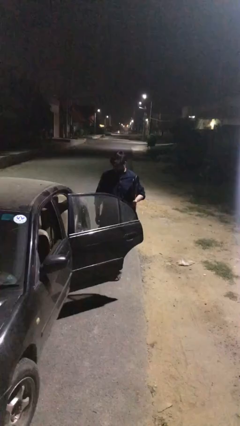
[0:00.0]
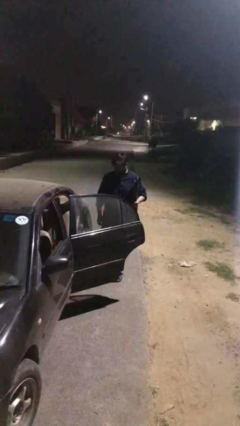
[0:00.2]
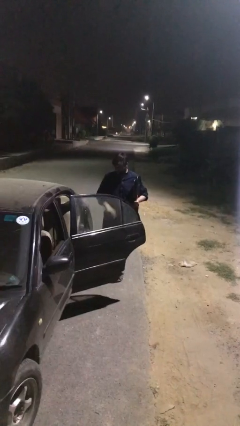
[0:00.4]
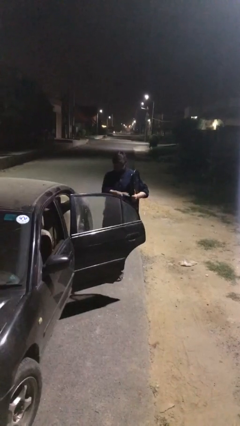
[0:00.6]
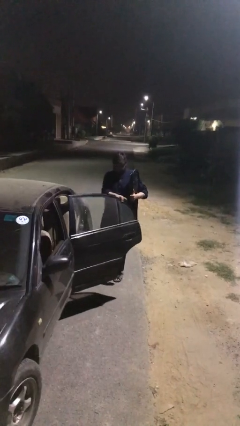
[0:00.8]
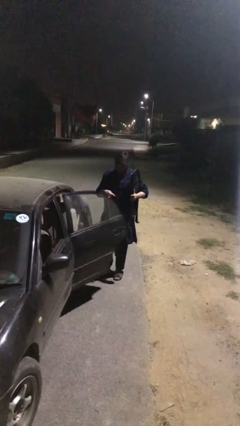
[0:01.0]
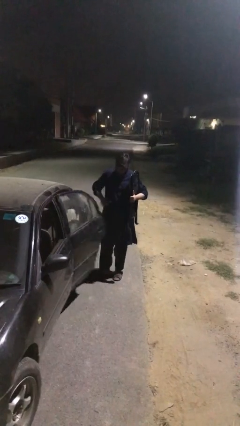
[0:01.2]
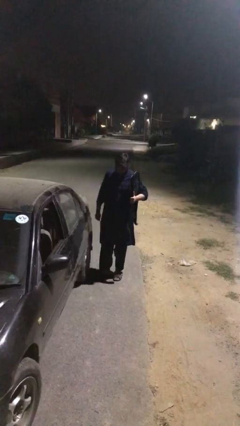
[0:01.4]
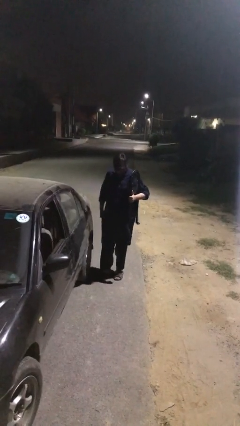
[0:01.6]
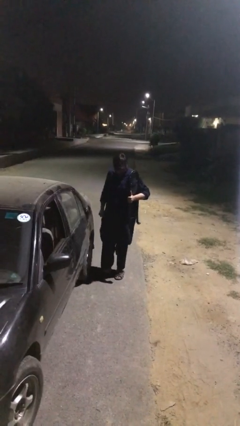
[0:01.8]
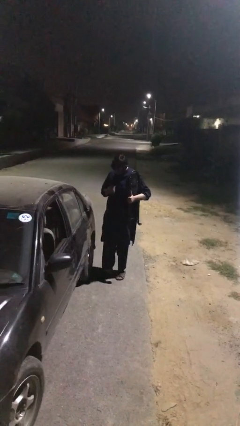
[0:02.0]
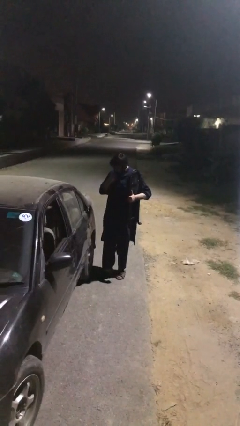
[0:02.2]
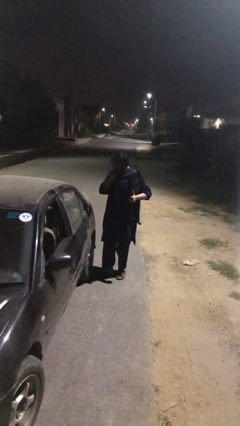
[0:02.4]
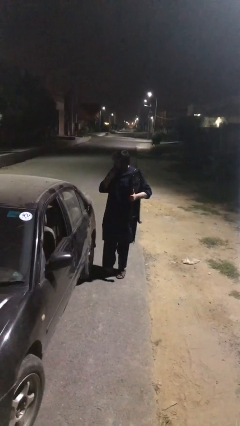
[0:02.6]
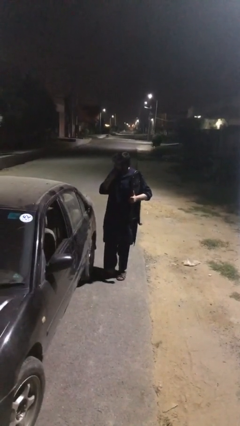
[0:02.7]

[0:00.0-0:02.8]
person closes car door

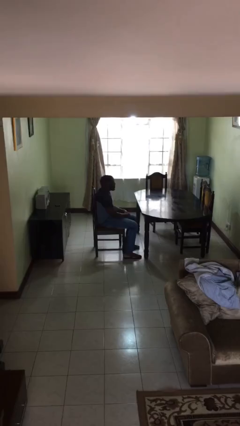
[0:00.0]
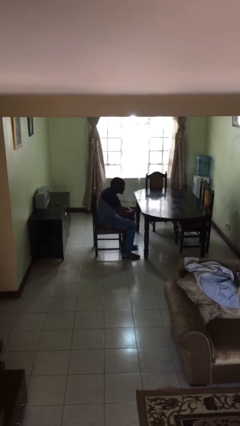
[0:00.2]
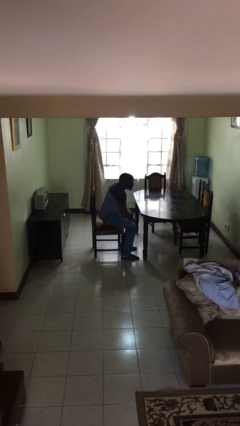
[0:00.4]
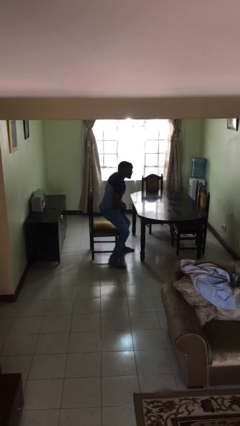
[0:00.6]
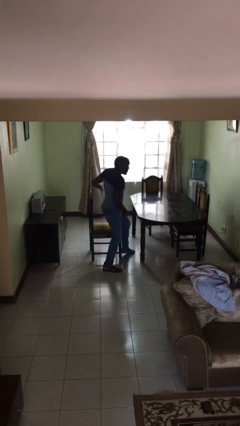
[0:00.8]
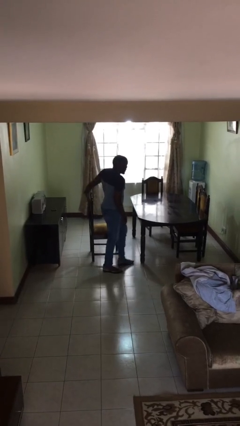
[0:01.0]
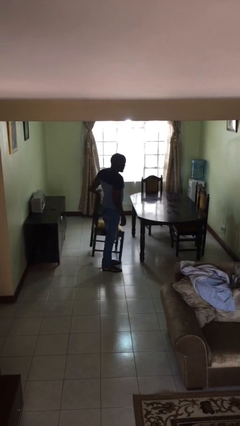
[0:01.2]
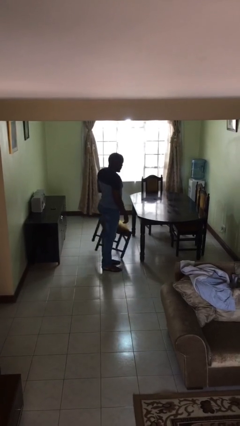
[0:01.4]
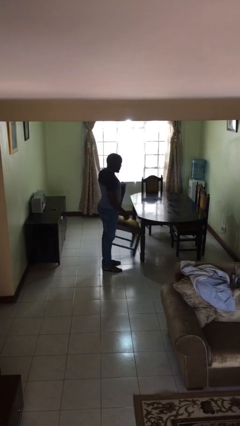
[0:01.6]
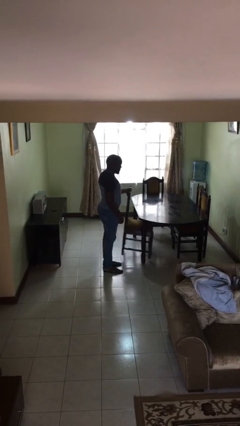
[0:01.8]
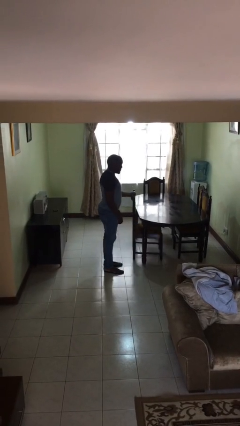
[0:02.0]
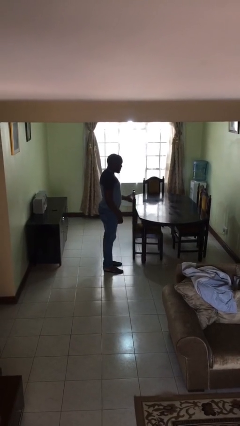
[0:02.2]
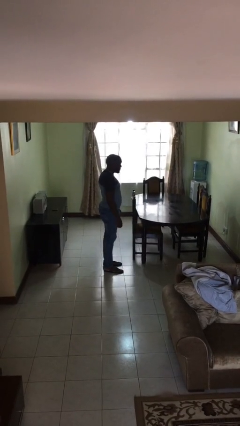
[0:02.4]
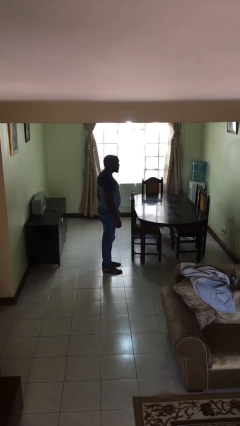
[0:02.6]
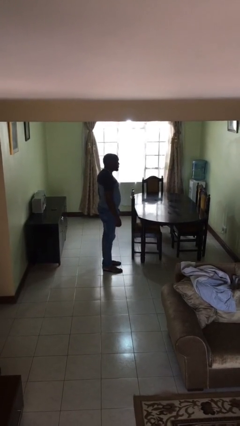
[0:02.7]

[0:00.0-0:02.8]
person stands up

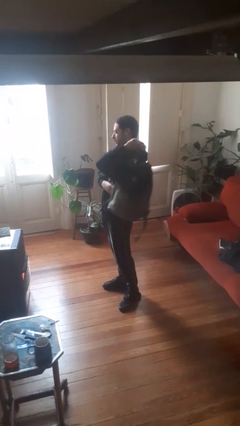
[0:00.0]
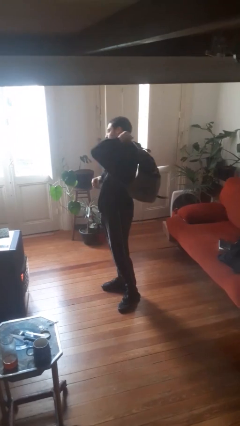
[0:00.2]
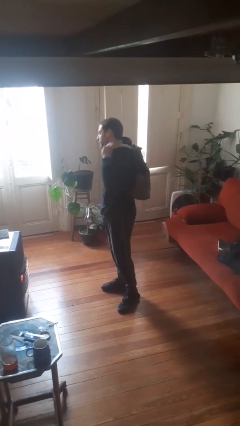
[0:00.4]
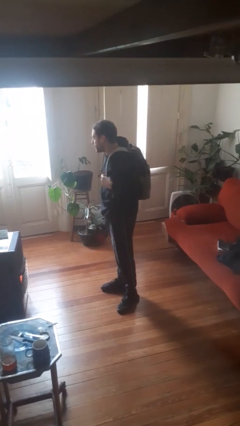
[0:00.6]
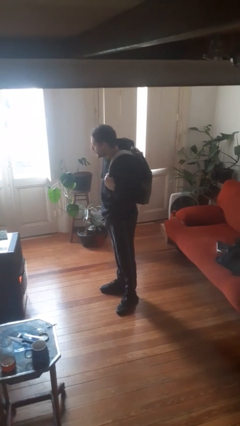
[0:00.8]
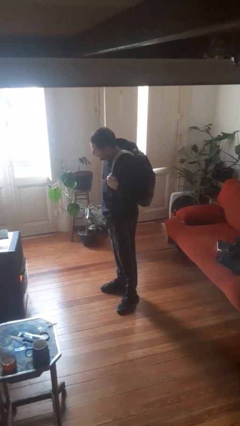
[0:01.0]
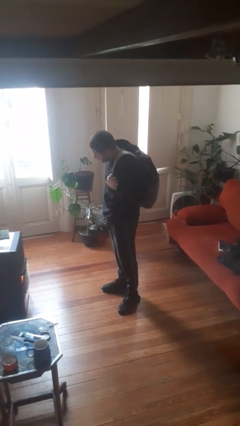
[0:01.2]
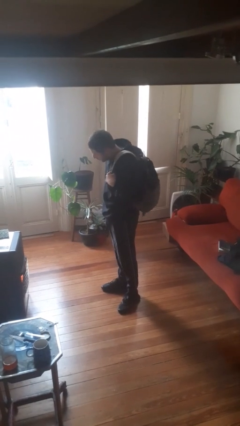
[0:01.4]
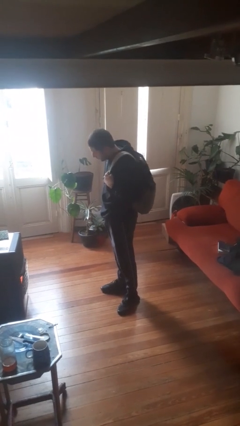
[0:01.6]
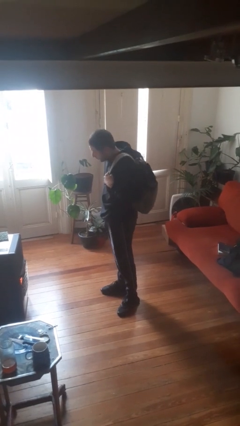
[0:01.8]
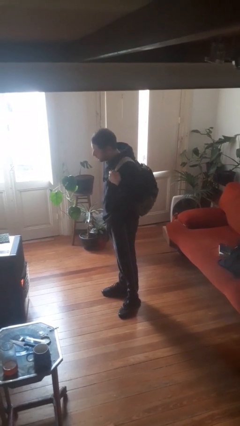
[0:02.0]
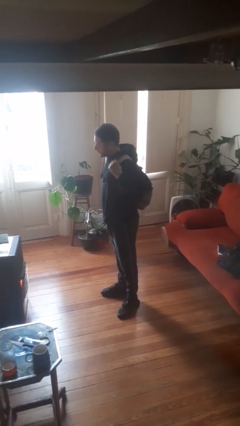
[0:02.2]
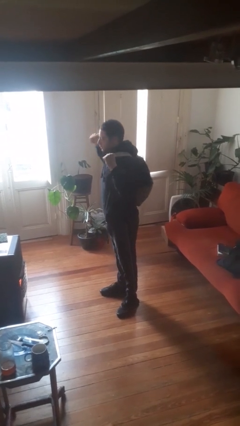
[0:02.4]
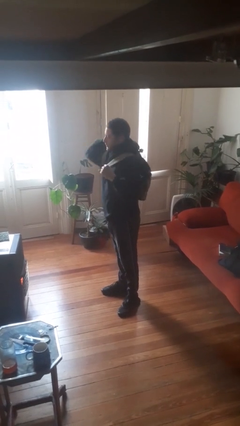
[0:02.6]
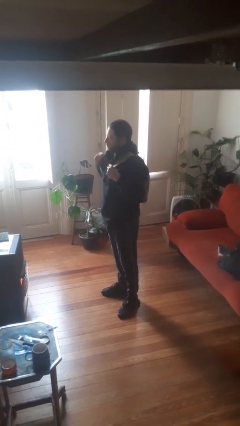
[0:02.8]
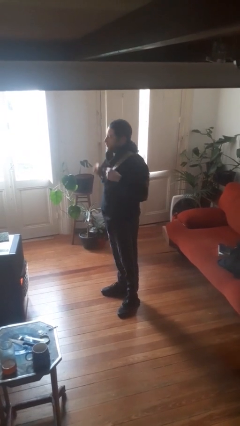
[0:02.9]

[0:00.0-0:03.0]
person puts on backpack

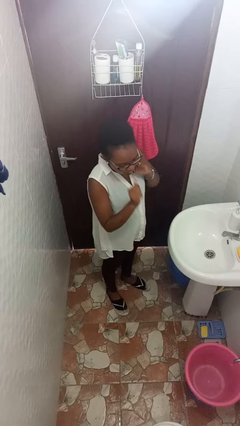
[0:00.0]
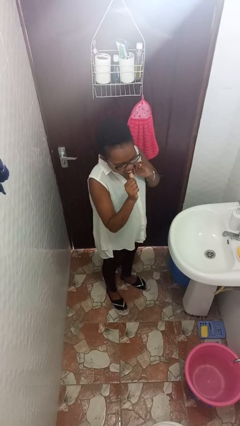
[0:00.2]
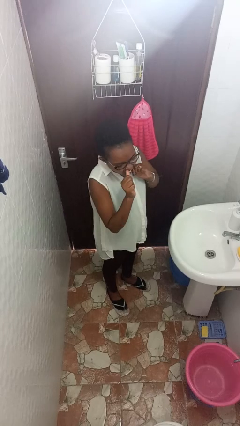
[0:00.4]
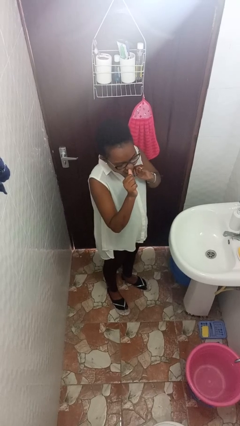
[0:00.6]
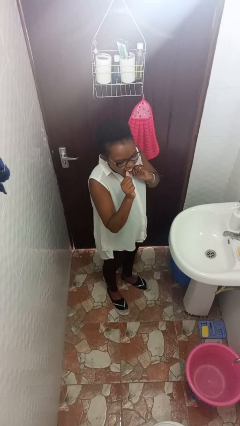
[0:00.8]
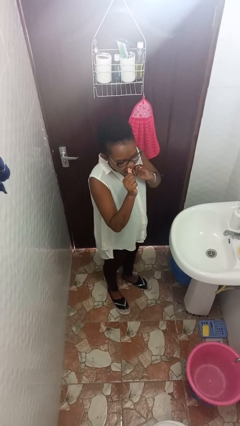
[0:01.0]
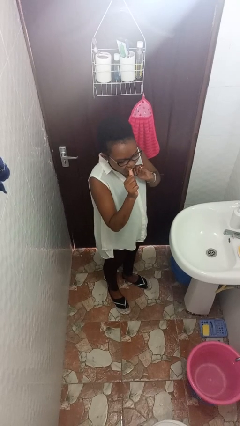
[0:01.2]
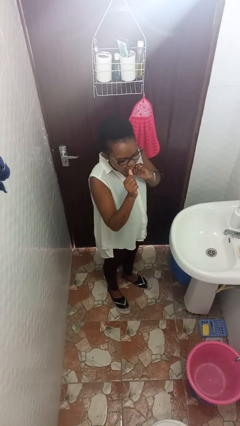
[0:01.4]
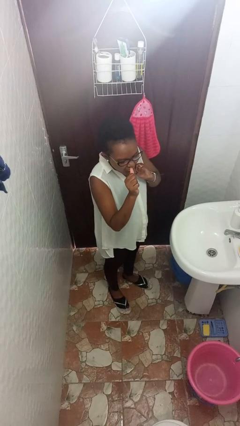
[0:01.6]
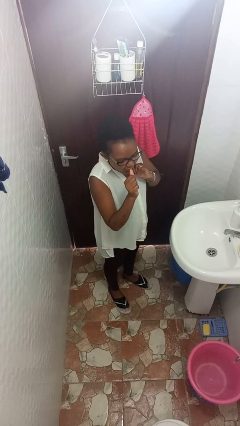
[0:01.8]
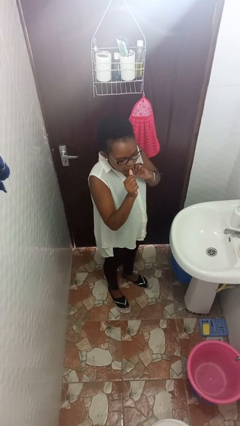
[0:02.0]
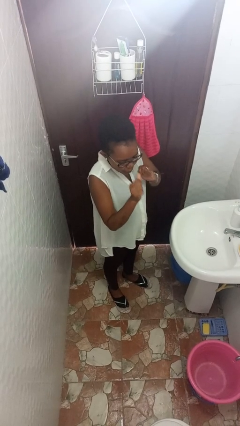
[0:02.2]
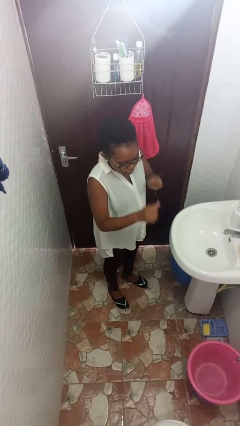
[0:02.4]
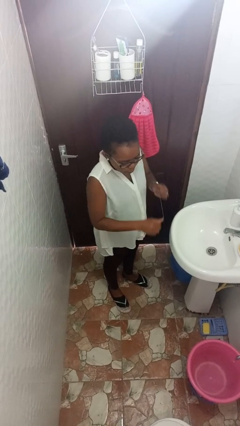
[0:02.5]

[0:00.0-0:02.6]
person flosses

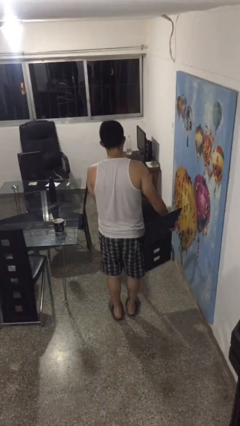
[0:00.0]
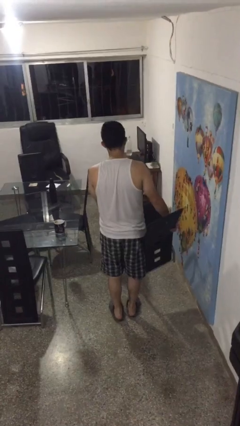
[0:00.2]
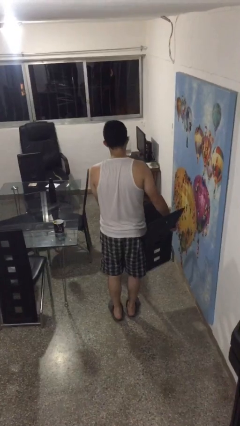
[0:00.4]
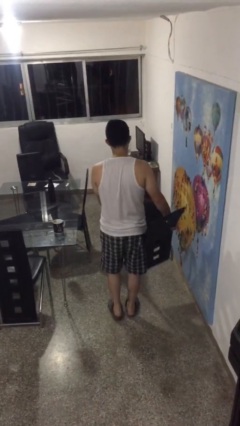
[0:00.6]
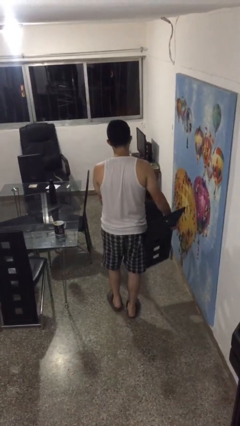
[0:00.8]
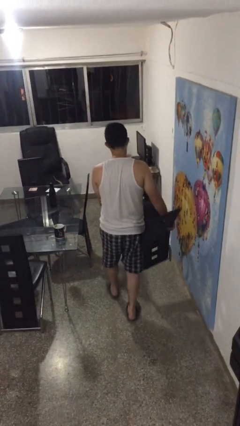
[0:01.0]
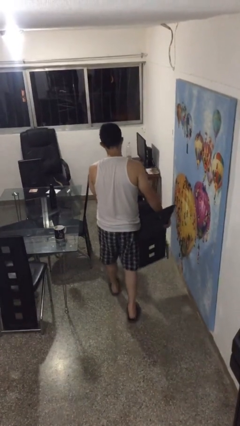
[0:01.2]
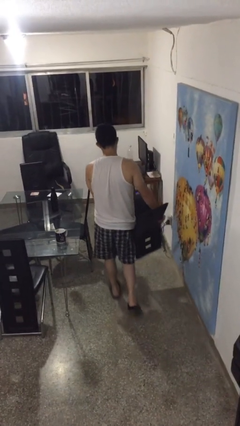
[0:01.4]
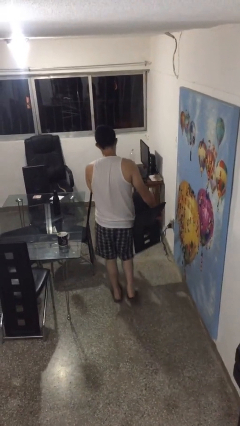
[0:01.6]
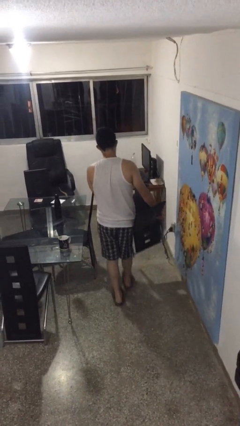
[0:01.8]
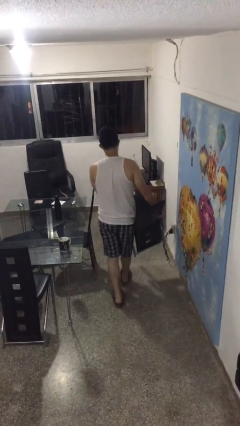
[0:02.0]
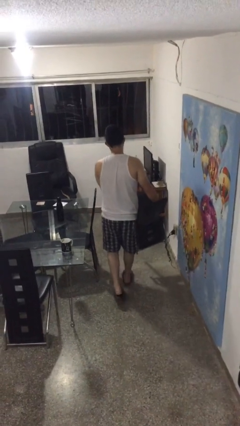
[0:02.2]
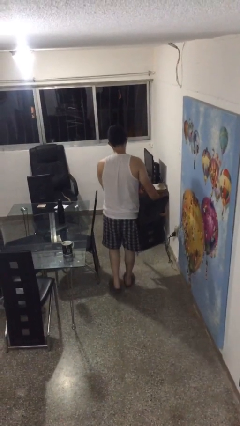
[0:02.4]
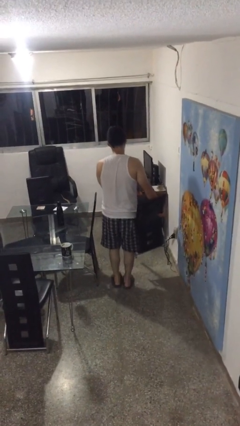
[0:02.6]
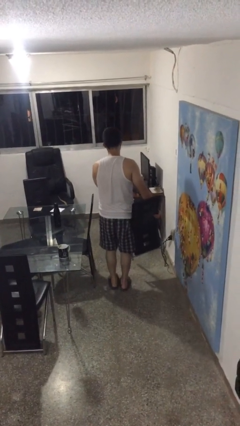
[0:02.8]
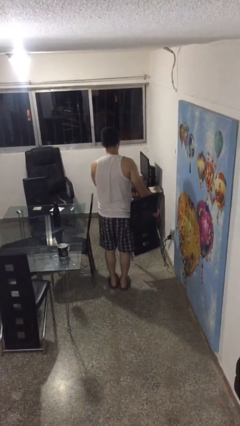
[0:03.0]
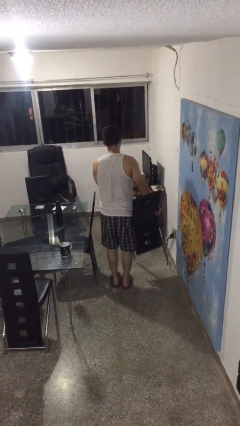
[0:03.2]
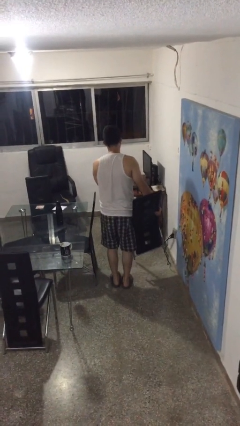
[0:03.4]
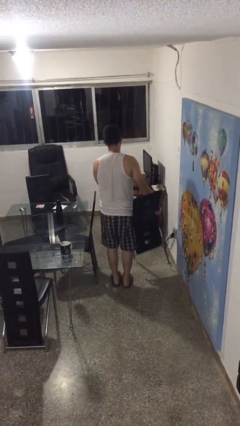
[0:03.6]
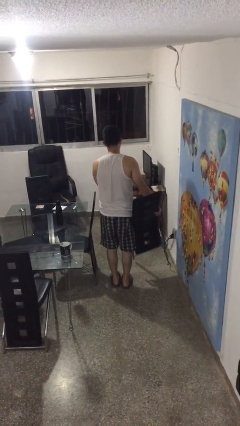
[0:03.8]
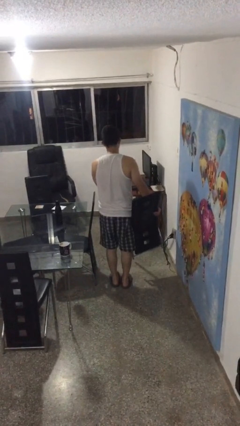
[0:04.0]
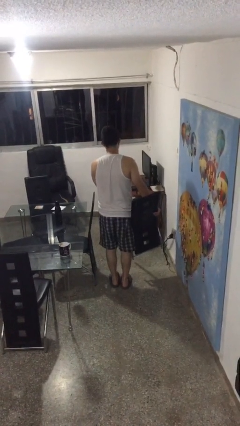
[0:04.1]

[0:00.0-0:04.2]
person carries furniture

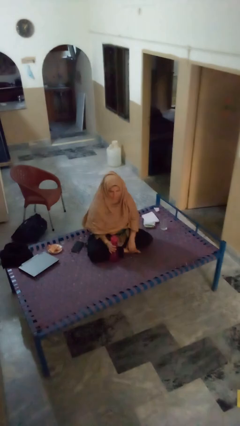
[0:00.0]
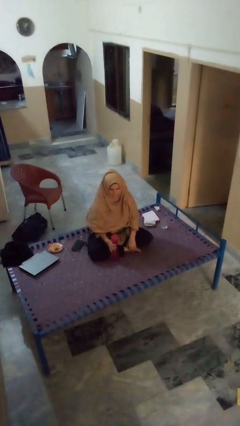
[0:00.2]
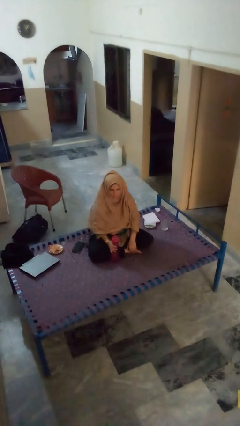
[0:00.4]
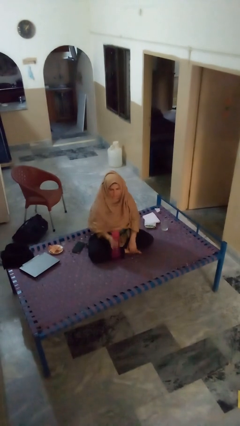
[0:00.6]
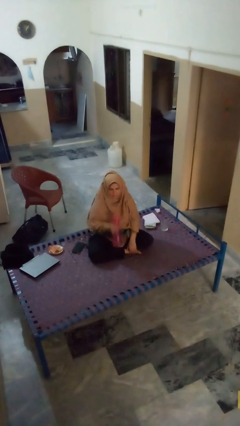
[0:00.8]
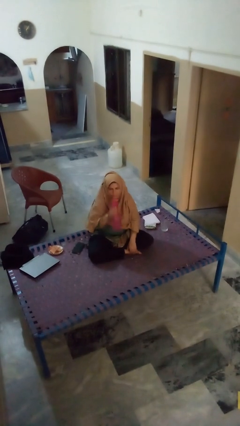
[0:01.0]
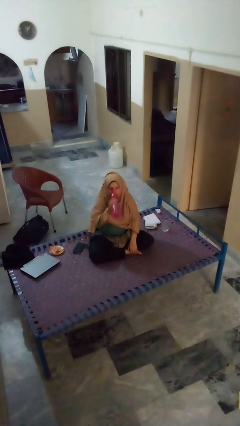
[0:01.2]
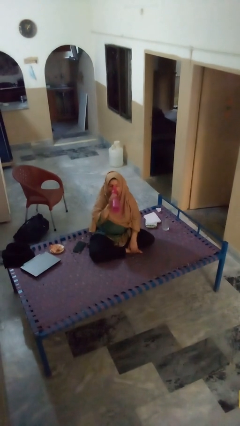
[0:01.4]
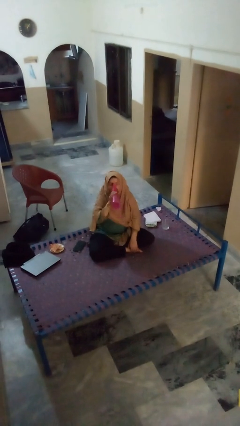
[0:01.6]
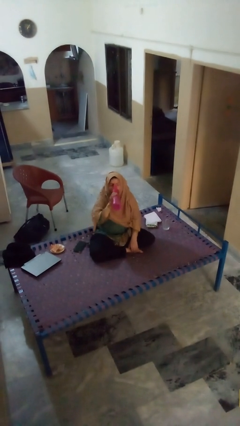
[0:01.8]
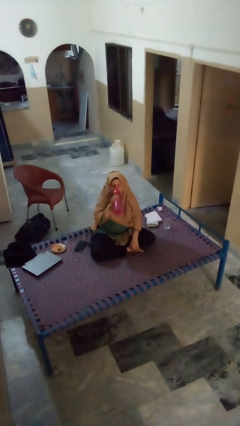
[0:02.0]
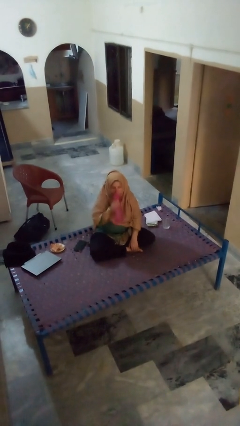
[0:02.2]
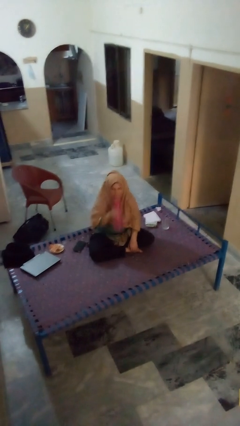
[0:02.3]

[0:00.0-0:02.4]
person drinks from bottle
